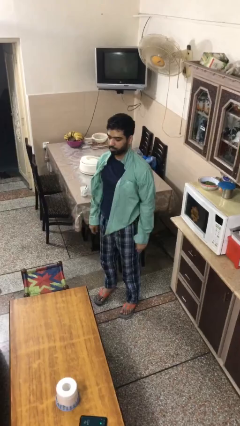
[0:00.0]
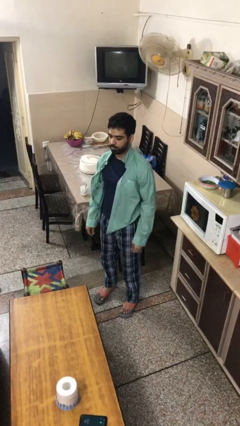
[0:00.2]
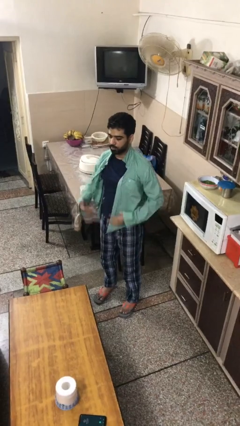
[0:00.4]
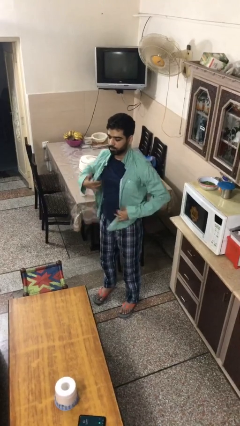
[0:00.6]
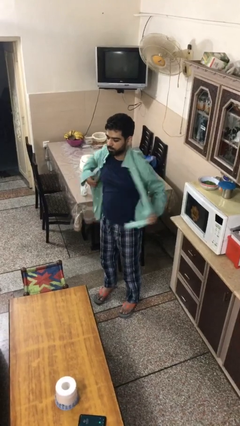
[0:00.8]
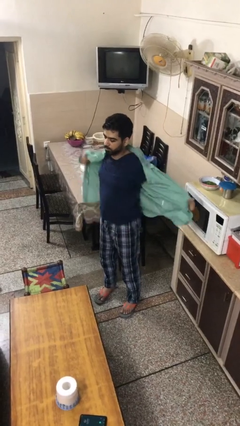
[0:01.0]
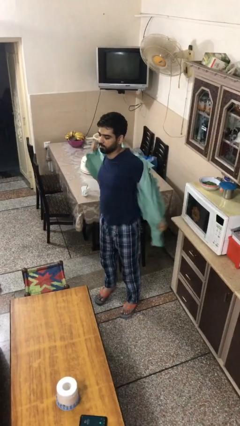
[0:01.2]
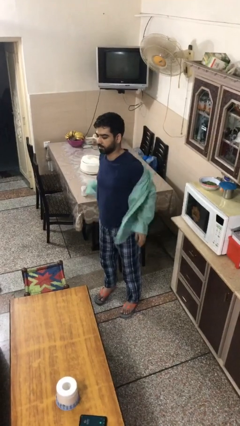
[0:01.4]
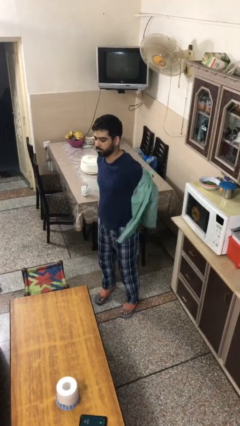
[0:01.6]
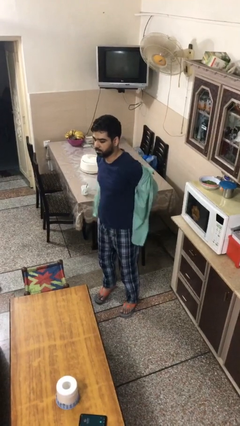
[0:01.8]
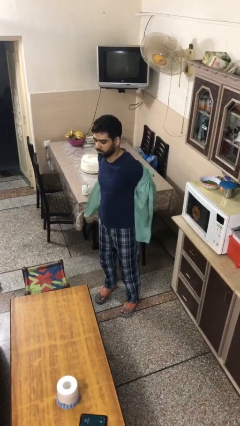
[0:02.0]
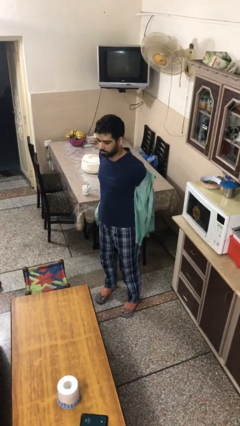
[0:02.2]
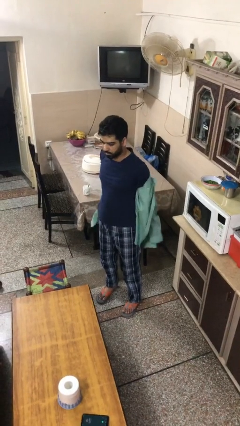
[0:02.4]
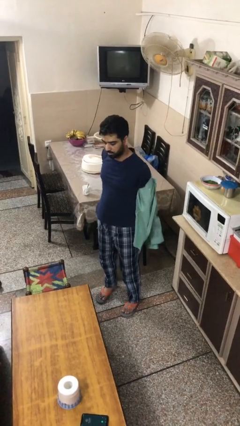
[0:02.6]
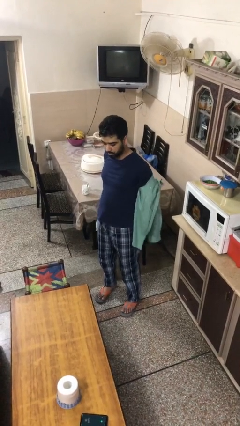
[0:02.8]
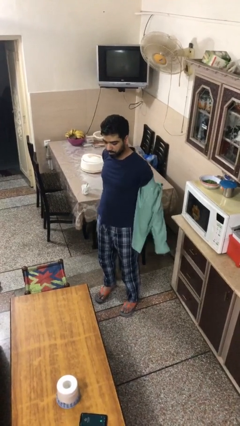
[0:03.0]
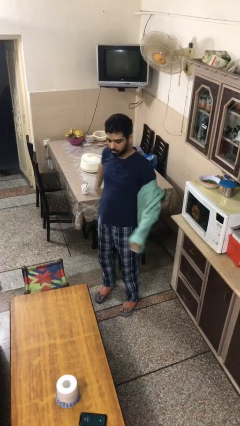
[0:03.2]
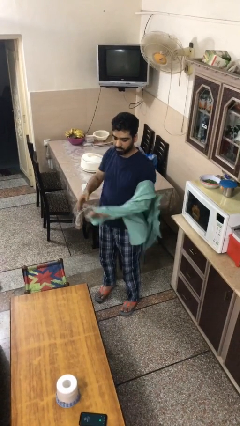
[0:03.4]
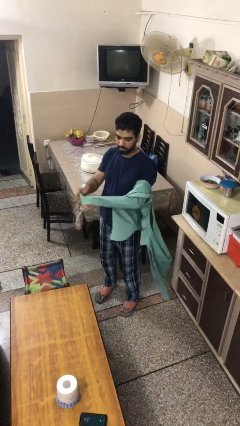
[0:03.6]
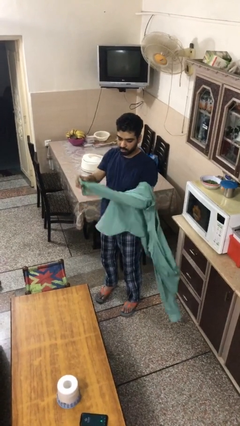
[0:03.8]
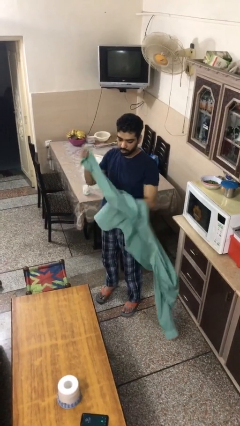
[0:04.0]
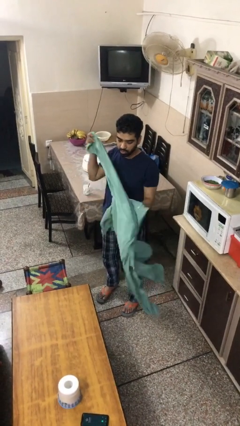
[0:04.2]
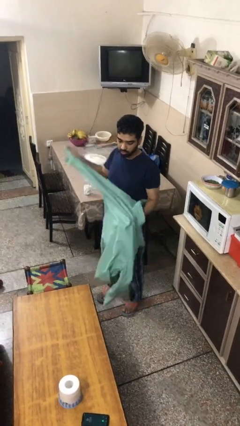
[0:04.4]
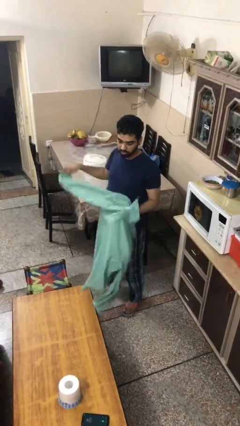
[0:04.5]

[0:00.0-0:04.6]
person takes off shirt

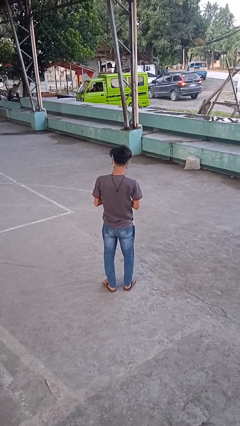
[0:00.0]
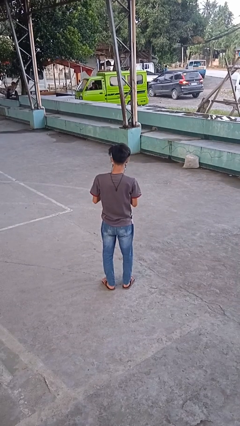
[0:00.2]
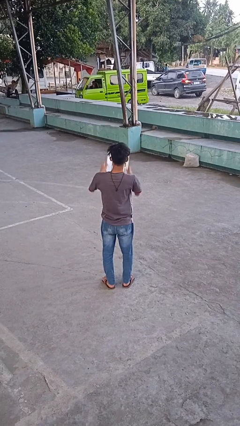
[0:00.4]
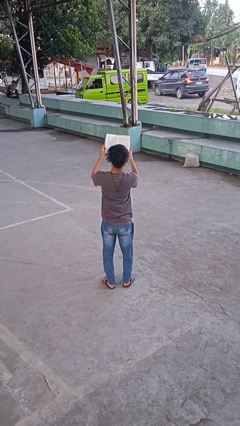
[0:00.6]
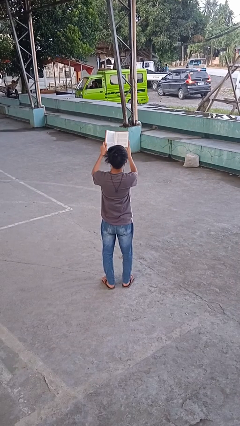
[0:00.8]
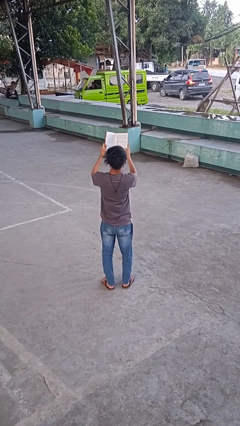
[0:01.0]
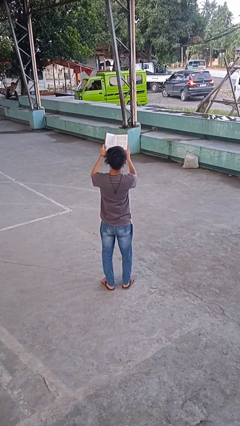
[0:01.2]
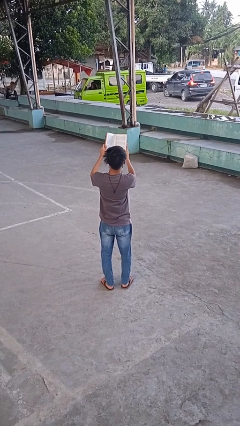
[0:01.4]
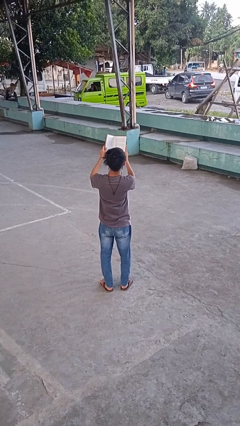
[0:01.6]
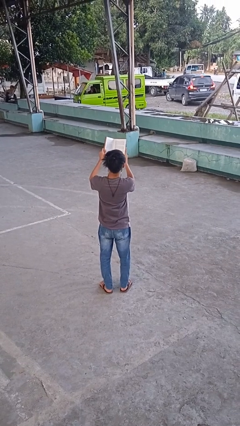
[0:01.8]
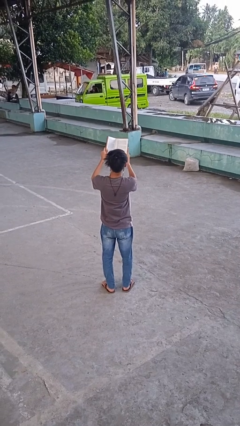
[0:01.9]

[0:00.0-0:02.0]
person reads book

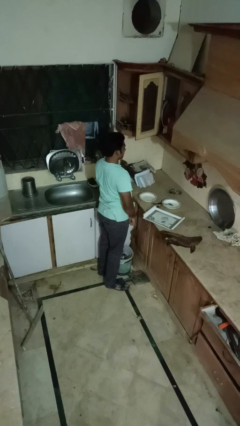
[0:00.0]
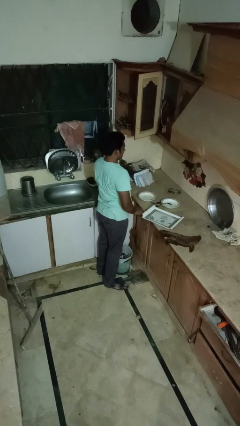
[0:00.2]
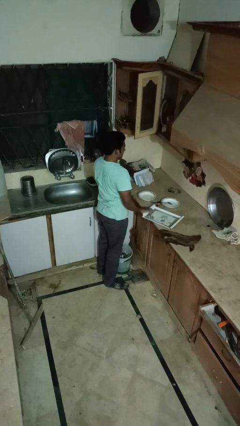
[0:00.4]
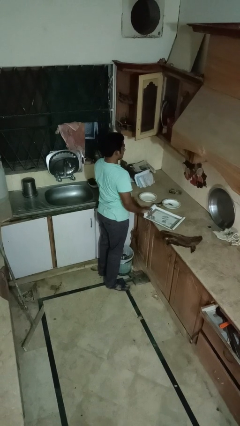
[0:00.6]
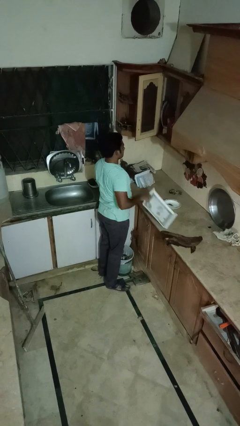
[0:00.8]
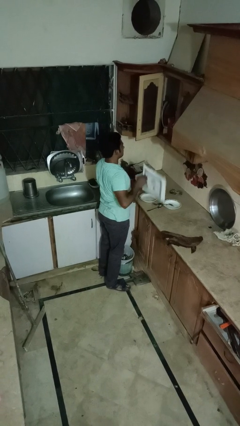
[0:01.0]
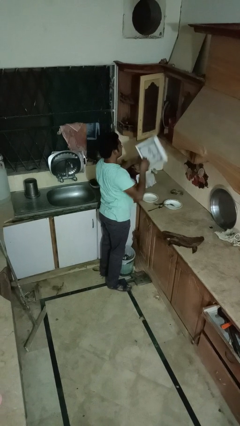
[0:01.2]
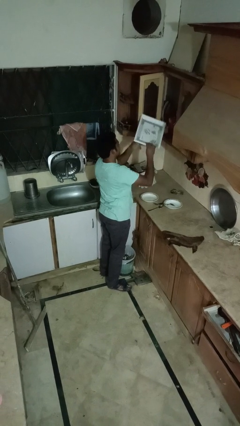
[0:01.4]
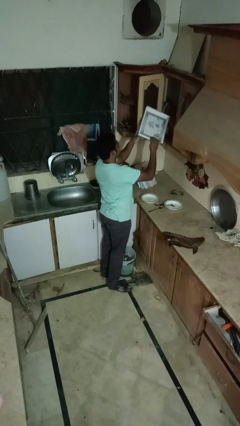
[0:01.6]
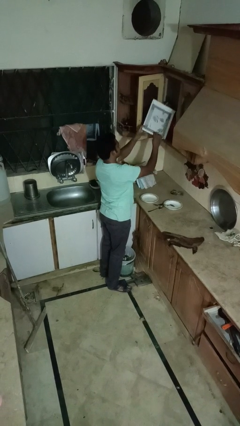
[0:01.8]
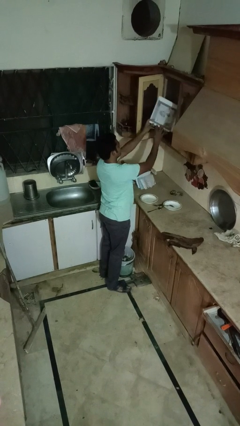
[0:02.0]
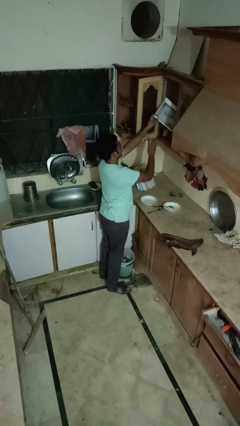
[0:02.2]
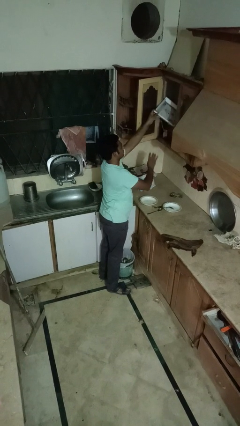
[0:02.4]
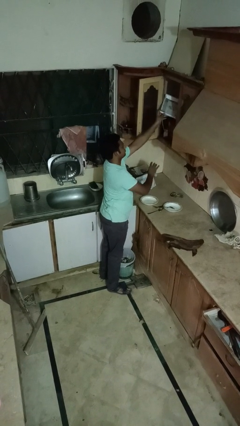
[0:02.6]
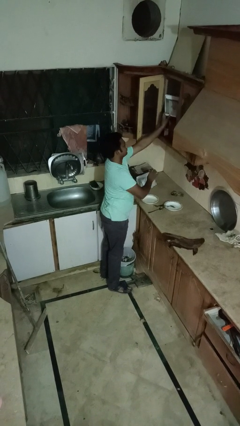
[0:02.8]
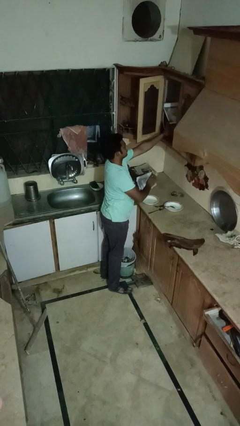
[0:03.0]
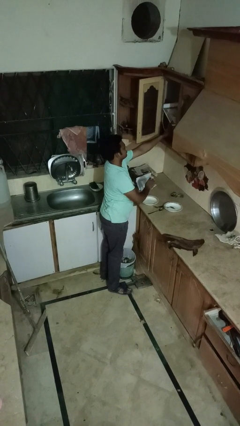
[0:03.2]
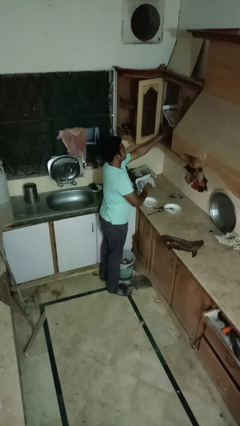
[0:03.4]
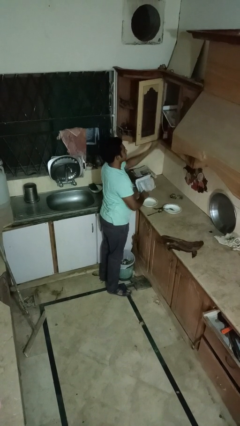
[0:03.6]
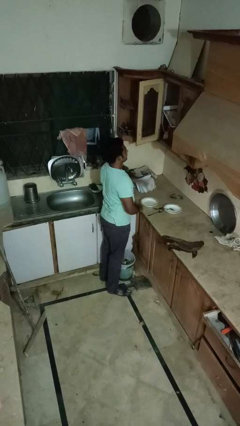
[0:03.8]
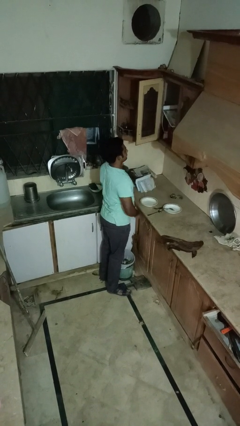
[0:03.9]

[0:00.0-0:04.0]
person puts object in cabinet

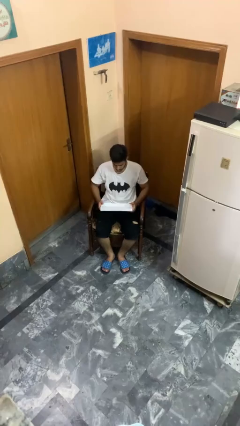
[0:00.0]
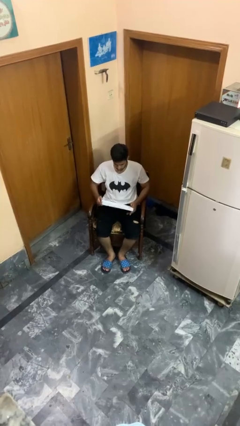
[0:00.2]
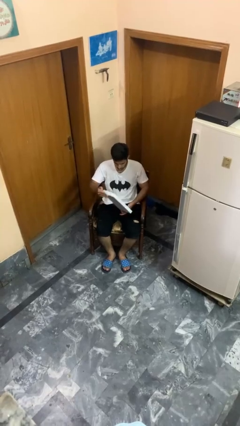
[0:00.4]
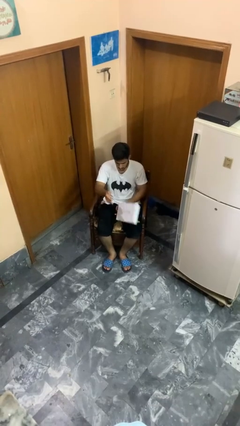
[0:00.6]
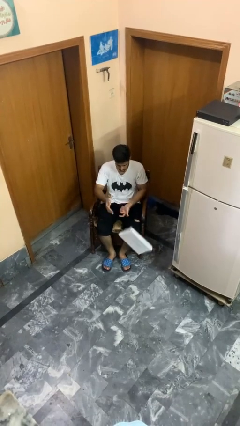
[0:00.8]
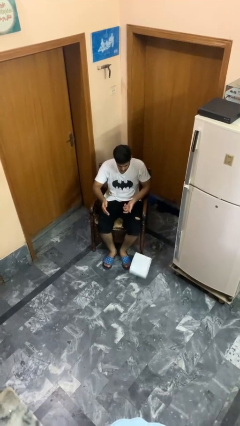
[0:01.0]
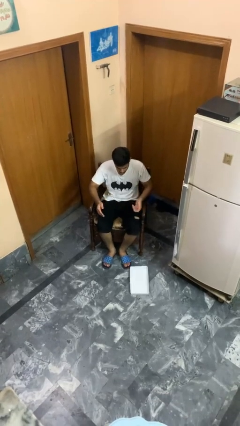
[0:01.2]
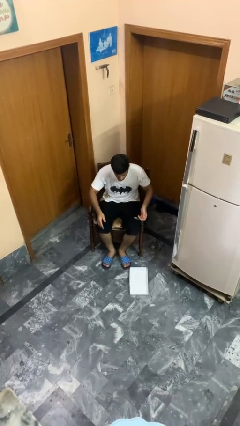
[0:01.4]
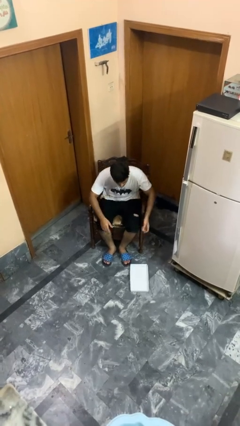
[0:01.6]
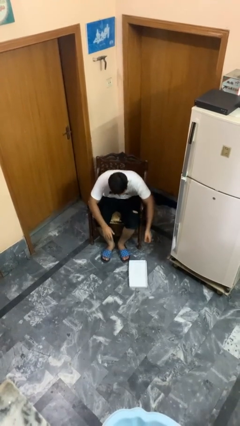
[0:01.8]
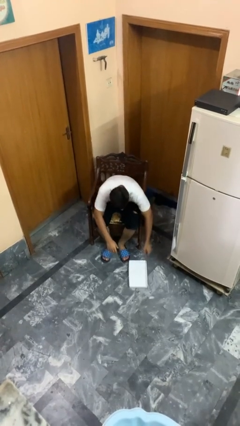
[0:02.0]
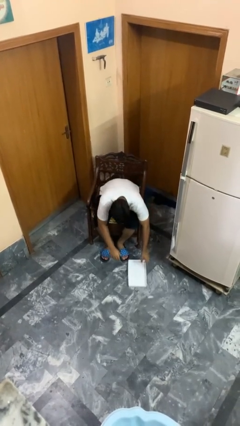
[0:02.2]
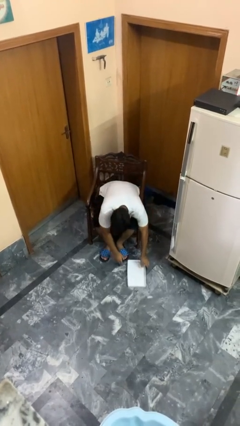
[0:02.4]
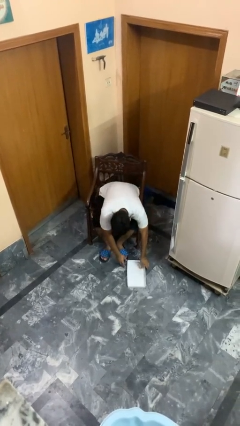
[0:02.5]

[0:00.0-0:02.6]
person drops object

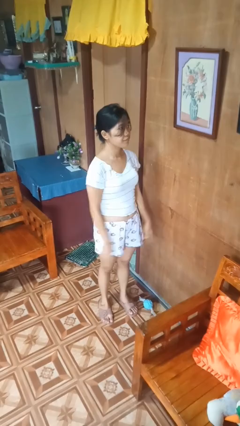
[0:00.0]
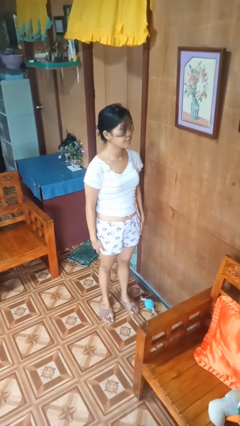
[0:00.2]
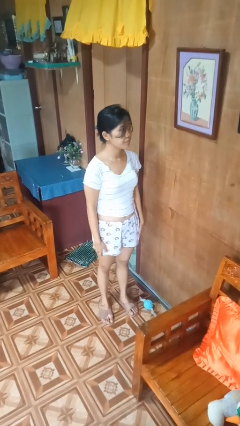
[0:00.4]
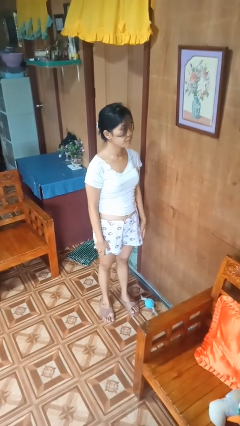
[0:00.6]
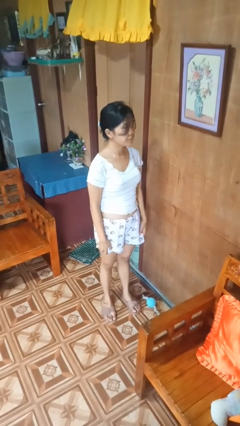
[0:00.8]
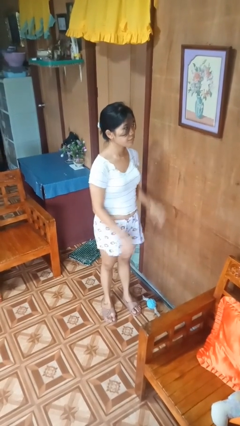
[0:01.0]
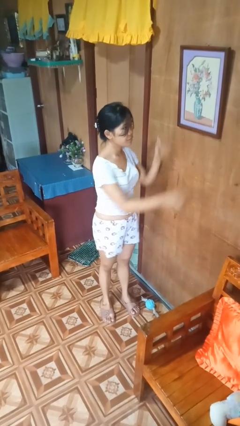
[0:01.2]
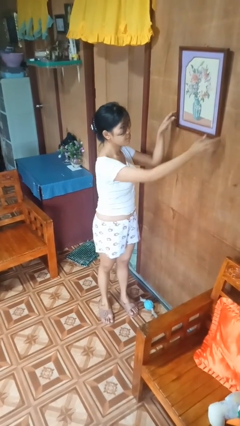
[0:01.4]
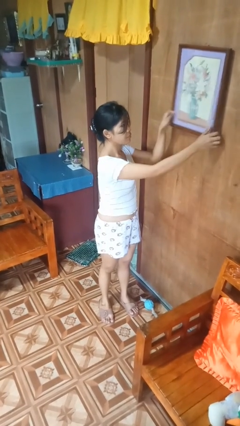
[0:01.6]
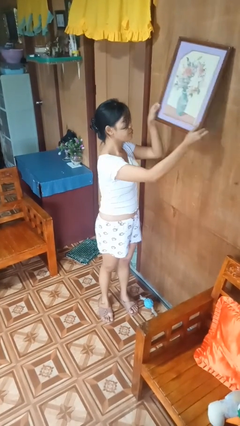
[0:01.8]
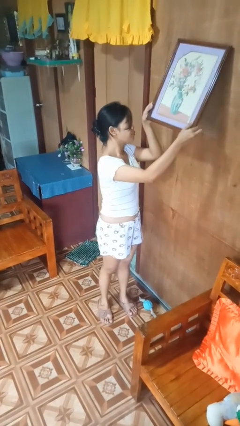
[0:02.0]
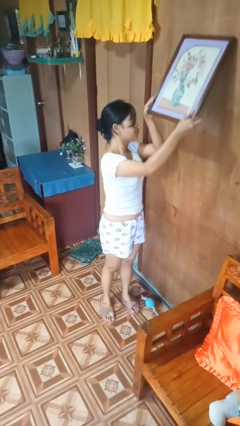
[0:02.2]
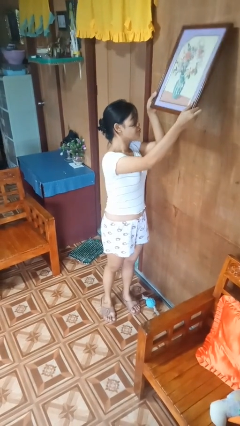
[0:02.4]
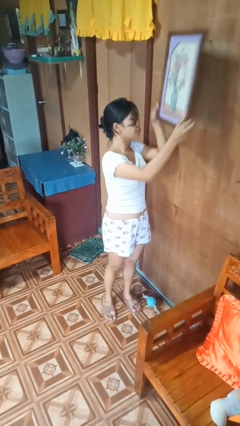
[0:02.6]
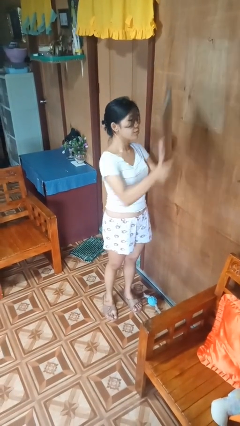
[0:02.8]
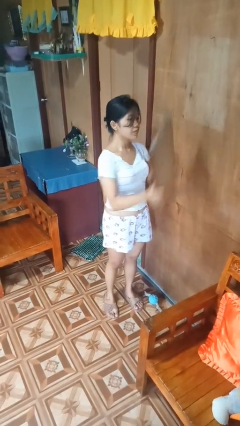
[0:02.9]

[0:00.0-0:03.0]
person takes down picture frame

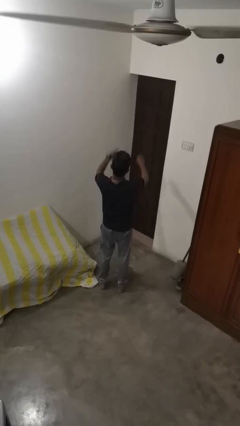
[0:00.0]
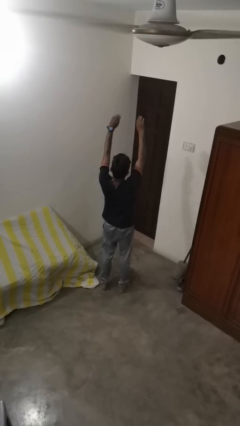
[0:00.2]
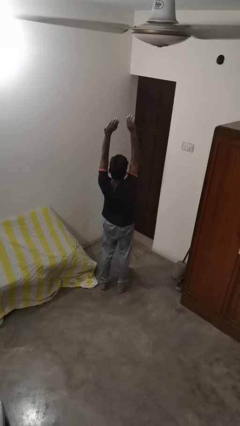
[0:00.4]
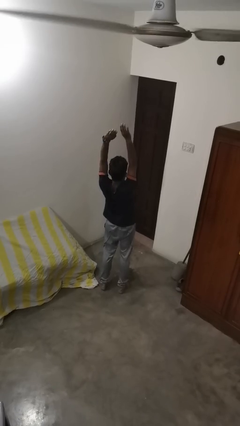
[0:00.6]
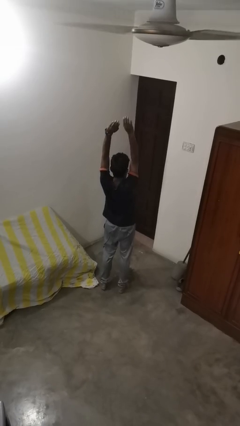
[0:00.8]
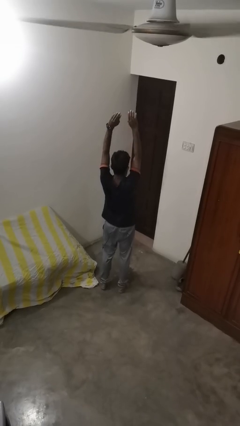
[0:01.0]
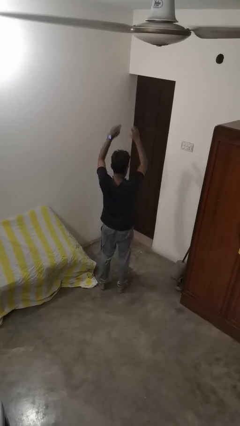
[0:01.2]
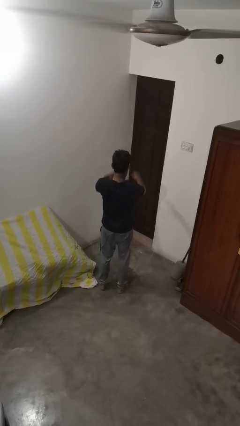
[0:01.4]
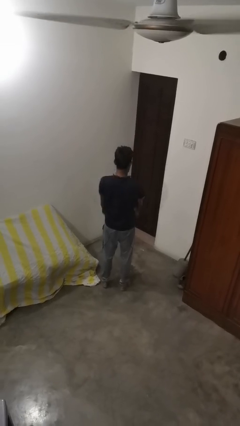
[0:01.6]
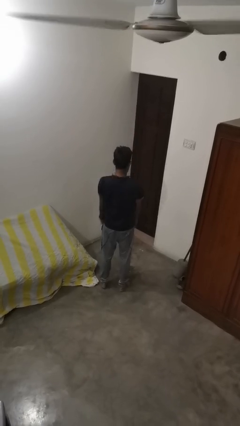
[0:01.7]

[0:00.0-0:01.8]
person stretches arms over head
